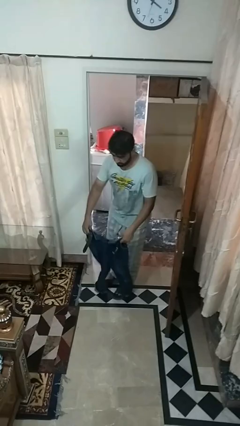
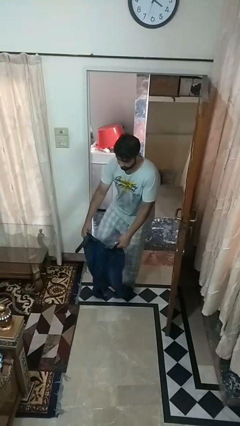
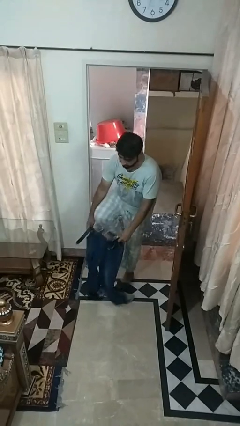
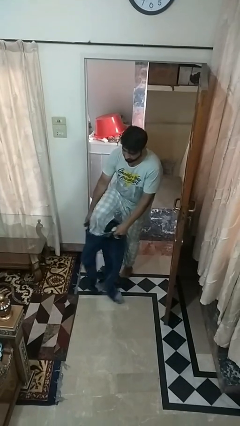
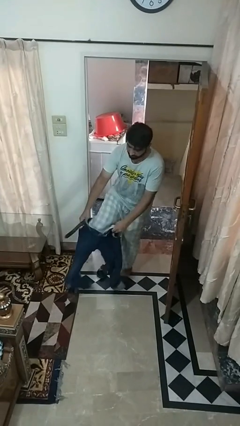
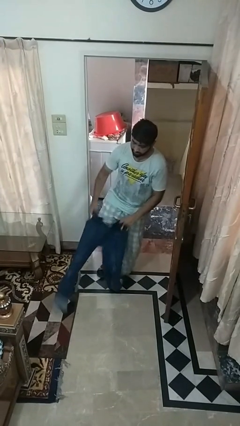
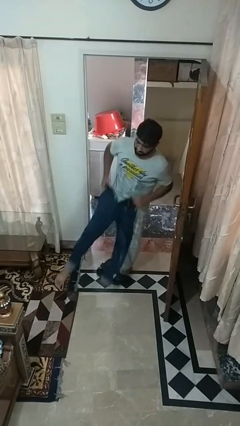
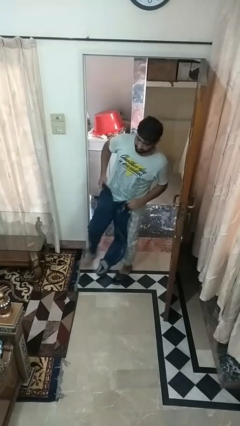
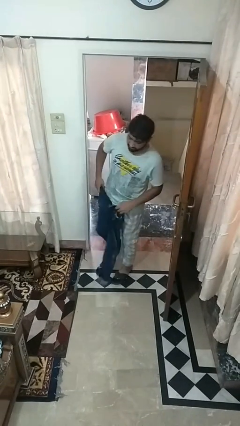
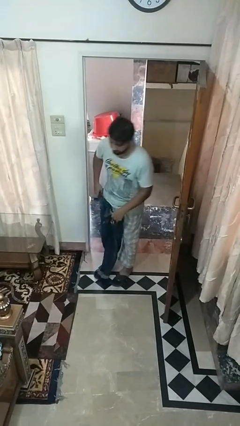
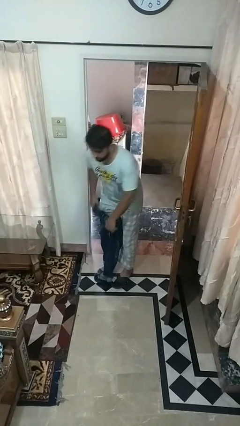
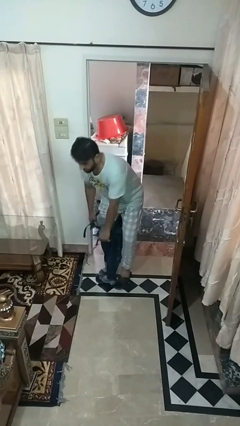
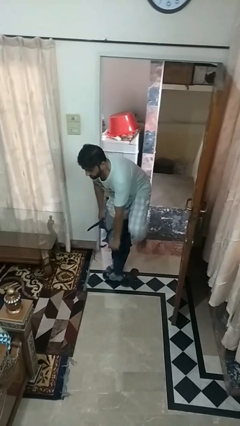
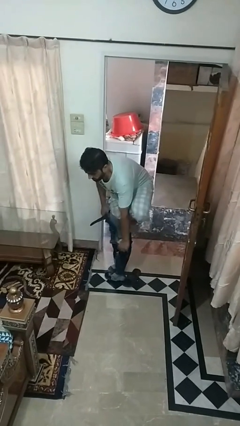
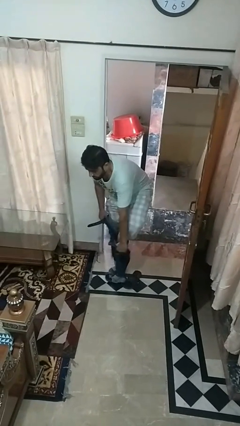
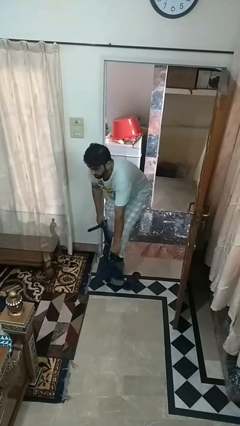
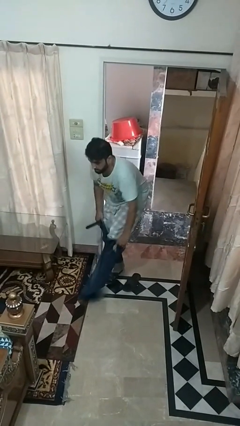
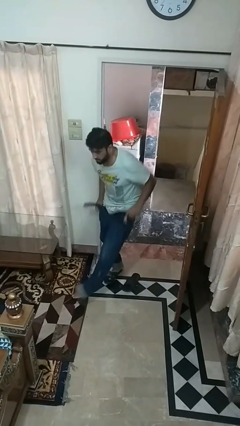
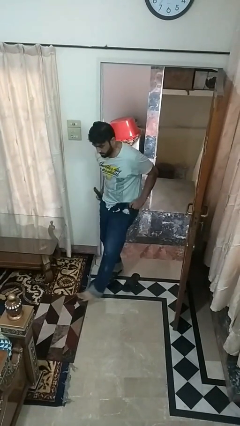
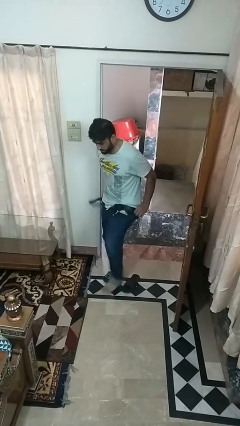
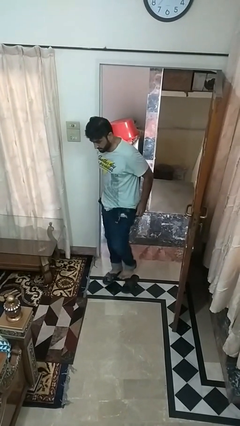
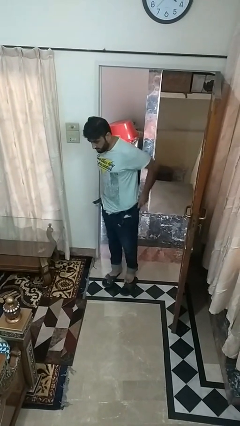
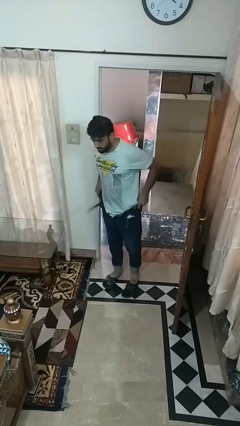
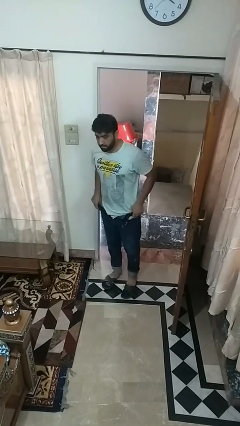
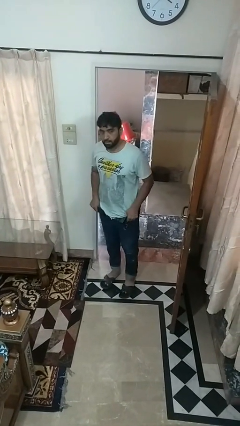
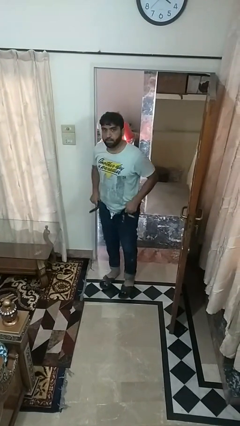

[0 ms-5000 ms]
person puts on pants

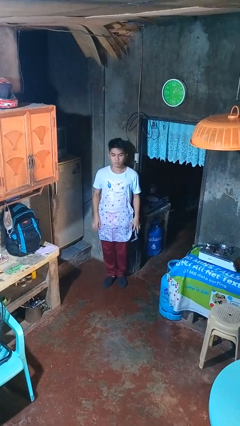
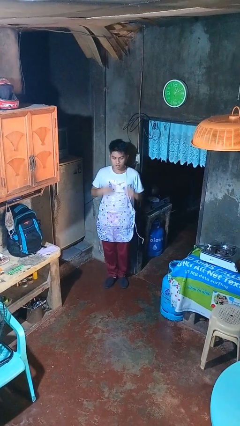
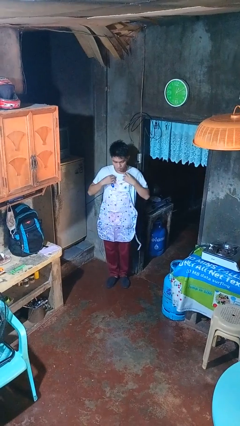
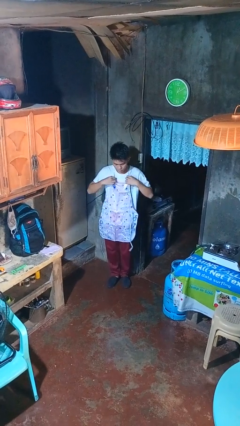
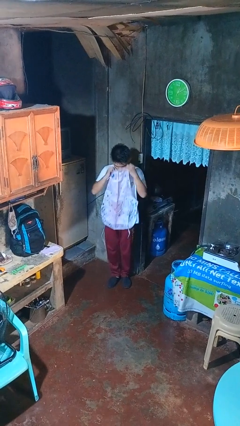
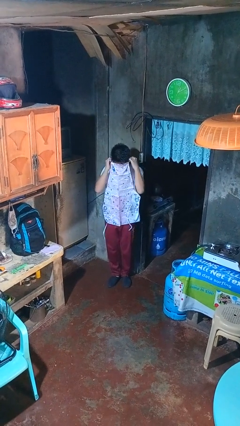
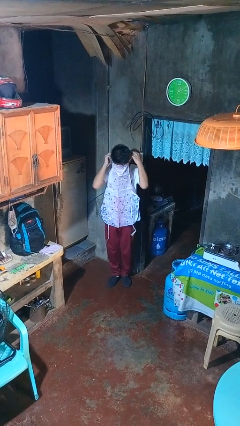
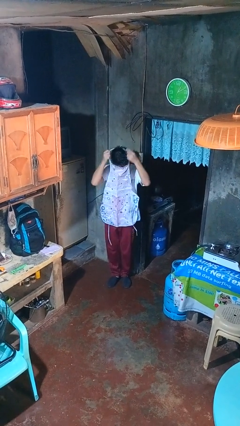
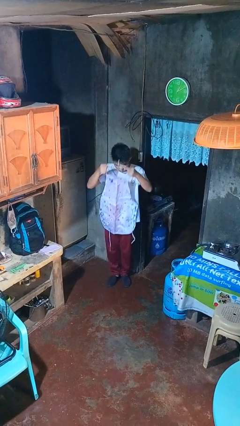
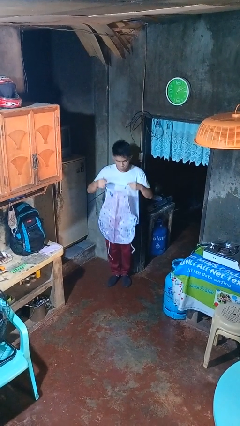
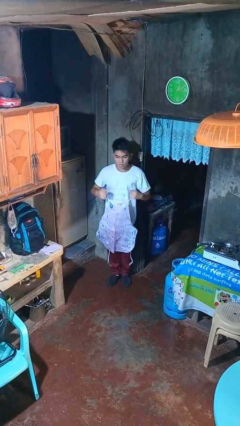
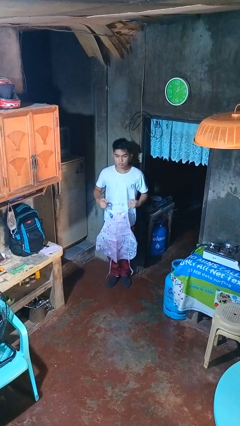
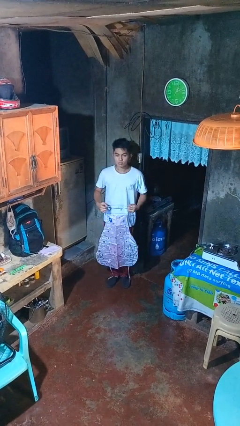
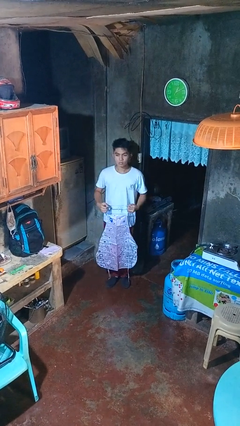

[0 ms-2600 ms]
person takes off apron

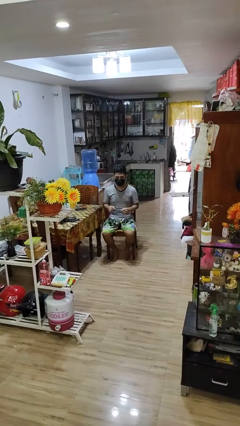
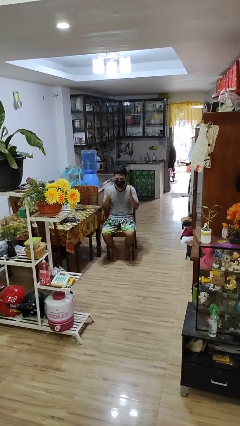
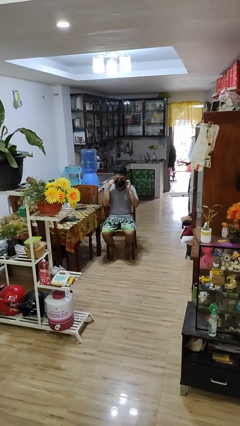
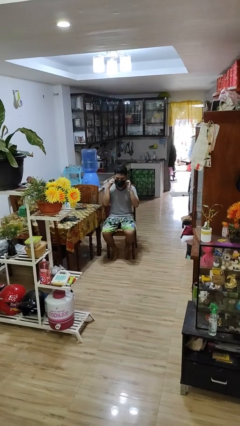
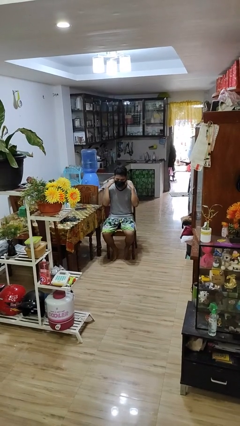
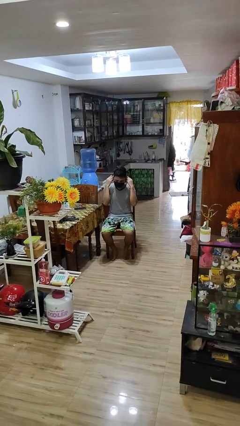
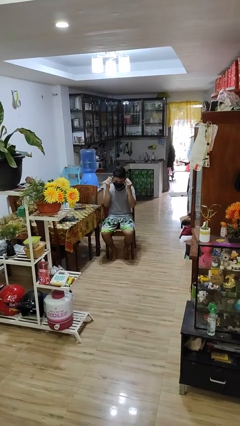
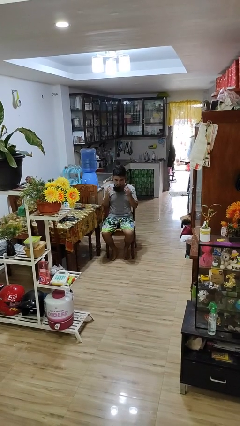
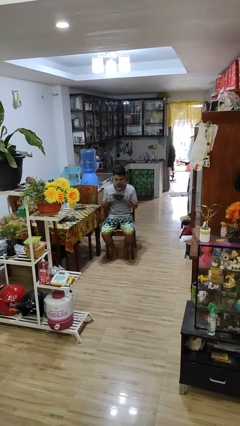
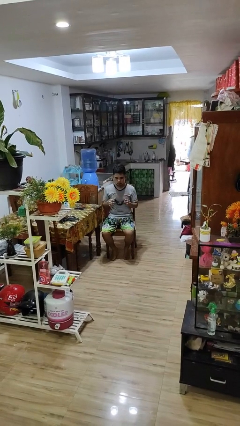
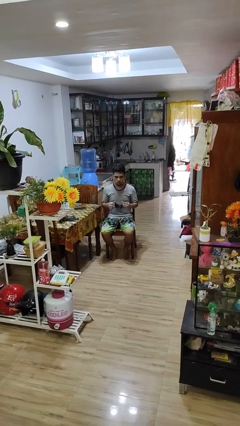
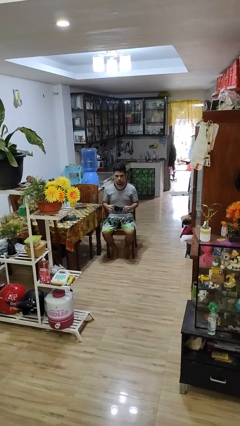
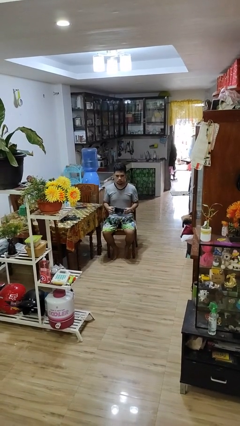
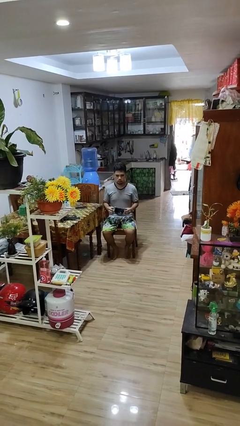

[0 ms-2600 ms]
person takes off facemask

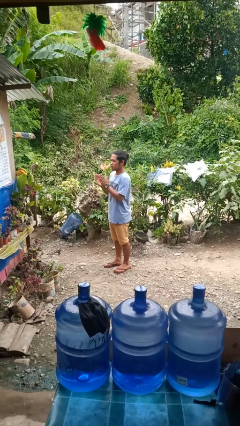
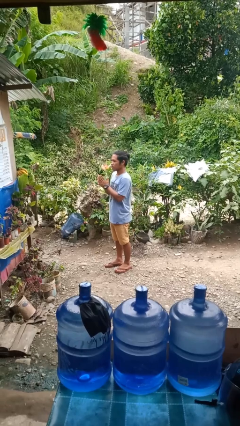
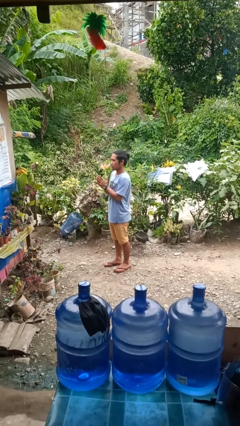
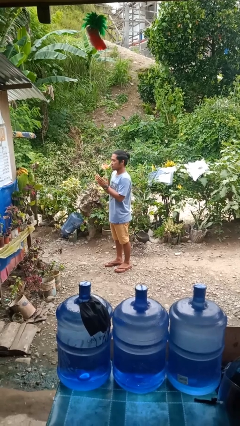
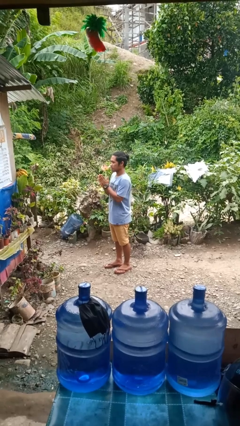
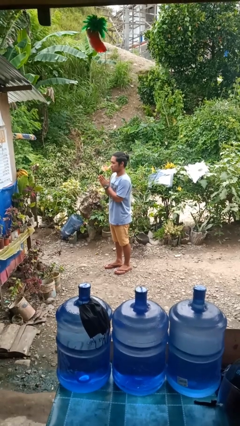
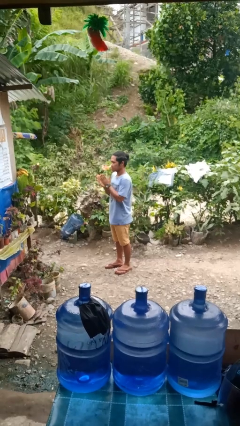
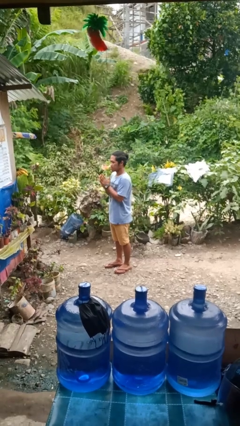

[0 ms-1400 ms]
person claps hands

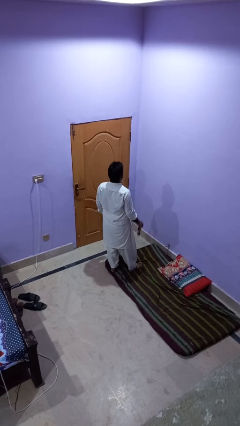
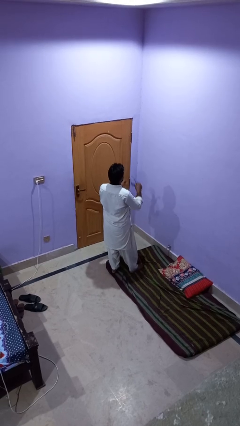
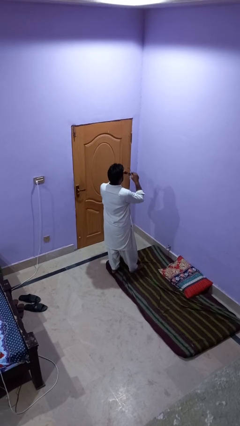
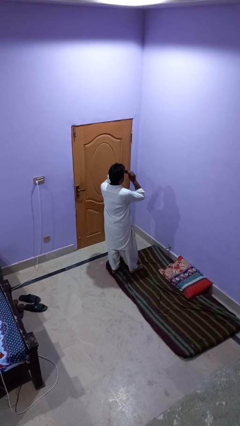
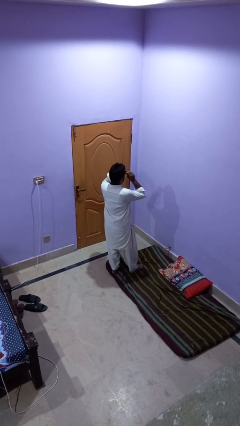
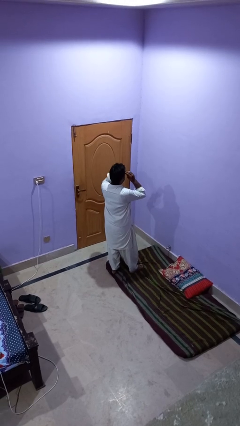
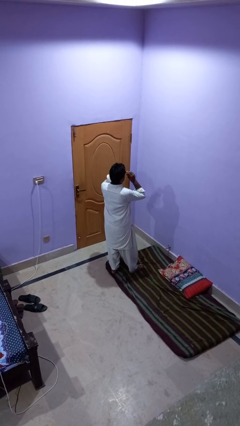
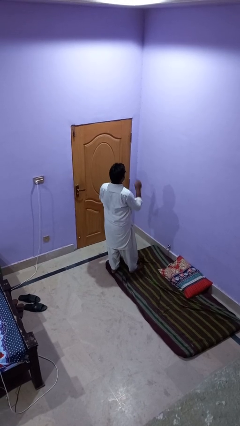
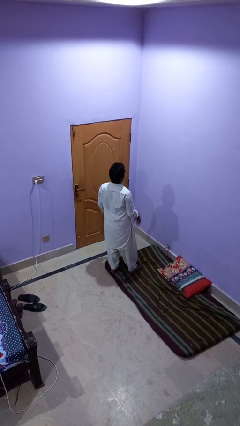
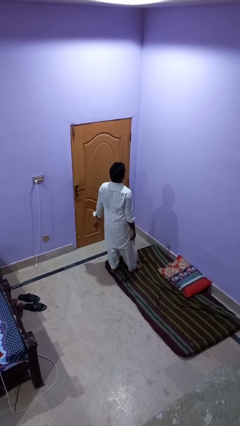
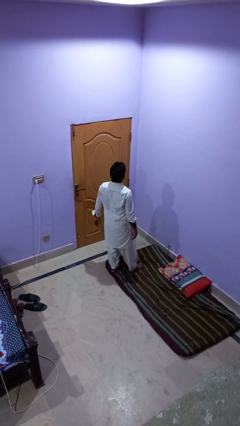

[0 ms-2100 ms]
person puts on sunglasses

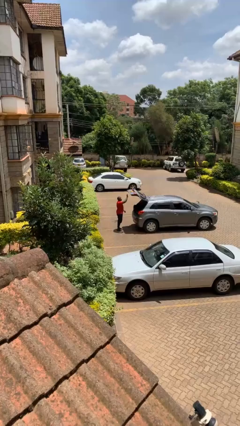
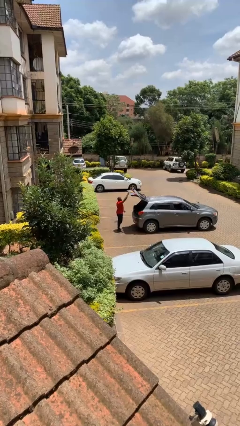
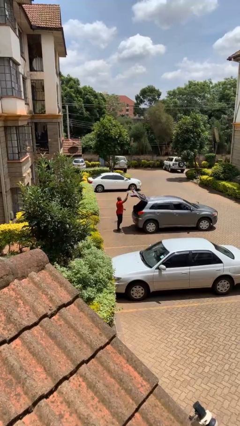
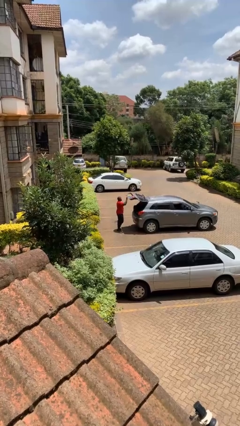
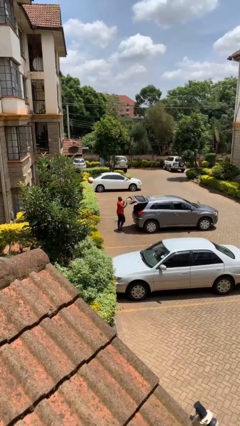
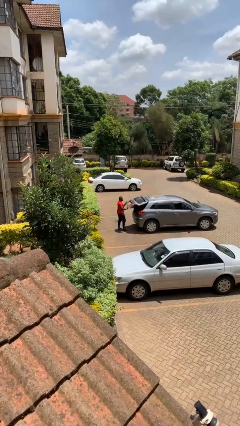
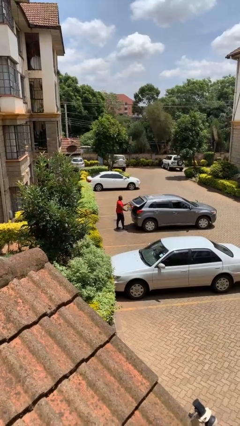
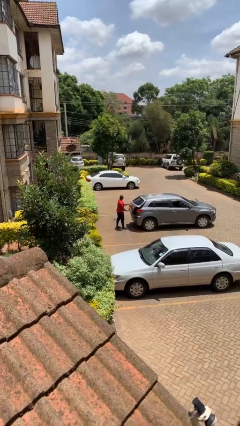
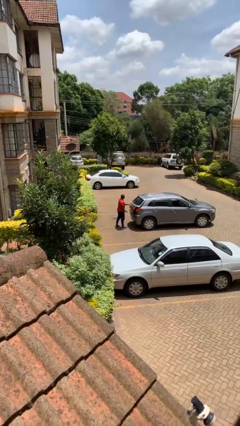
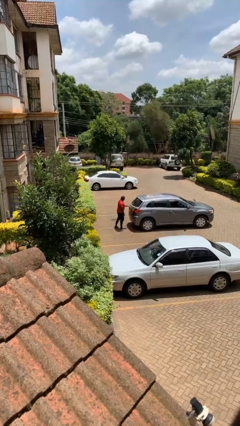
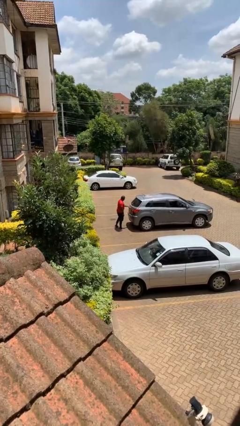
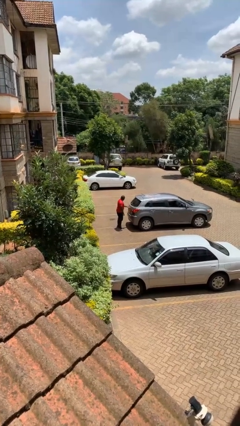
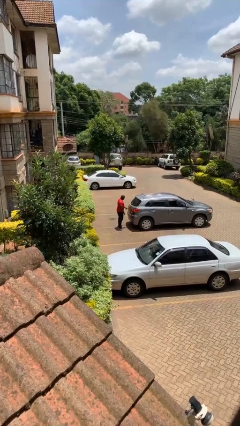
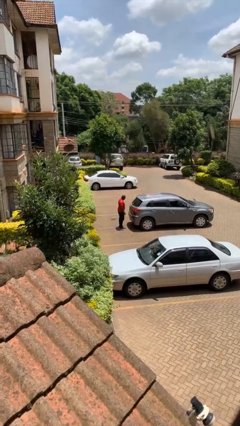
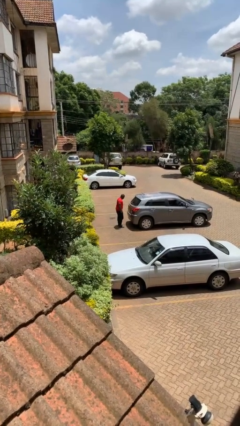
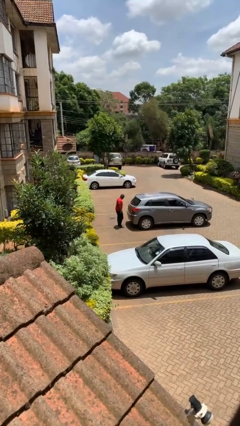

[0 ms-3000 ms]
person closes car trunk

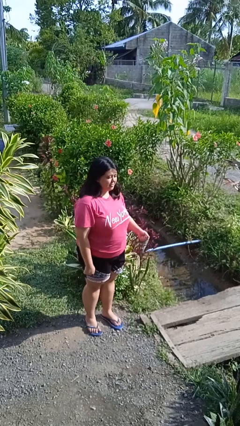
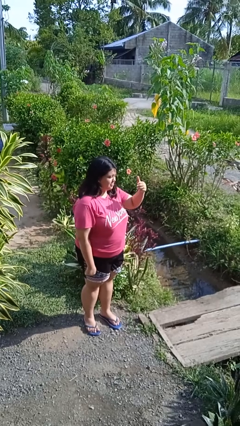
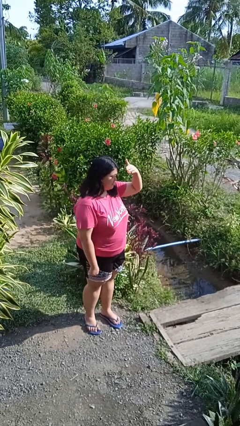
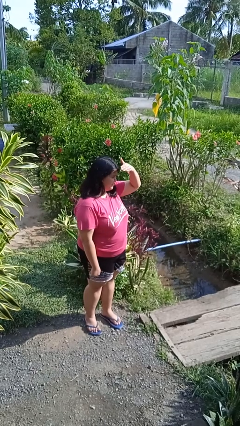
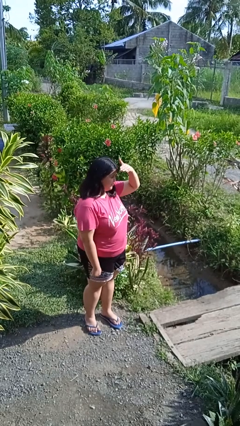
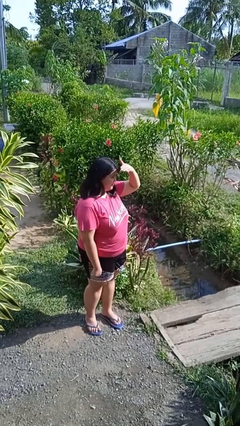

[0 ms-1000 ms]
person shades eyes
